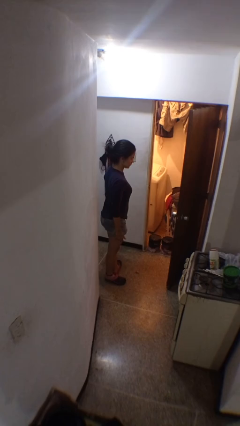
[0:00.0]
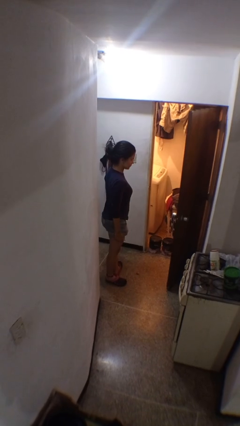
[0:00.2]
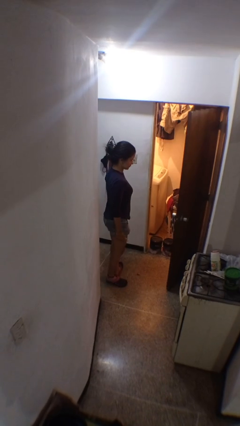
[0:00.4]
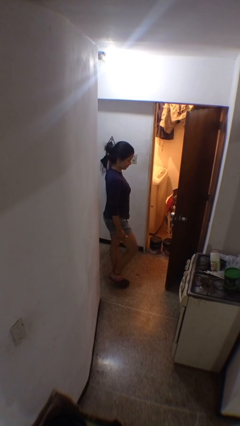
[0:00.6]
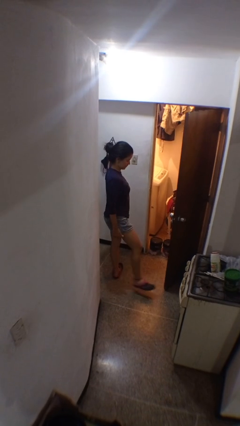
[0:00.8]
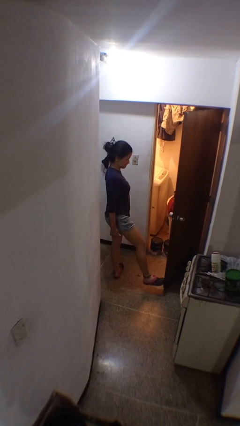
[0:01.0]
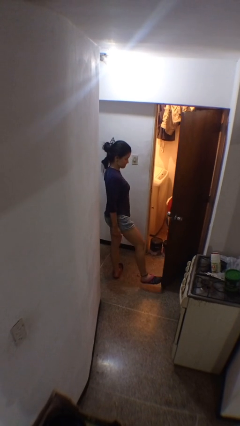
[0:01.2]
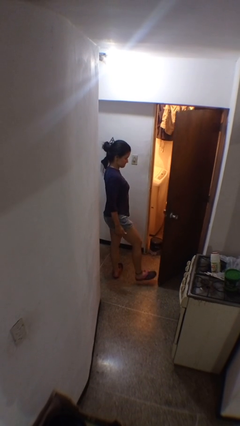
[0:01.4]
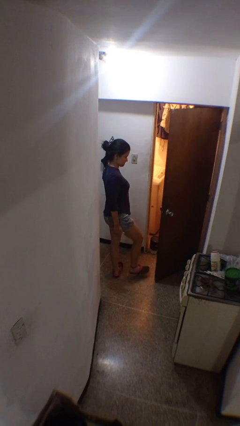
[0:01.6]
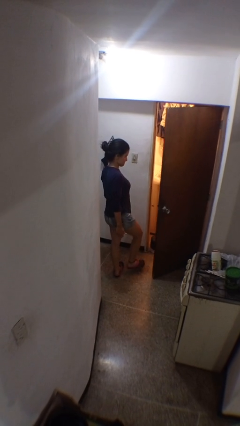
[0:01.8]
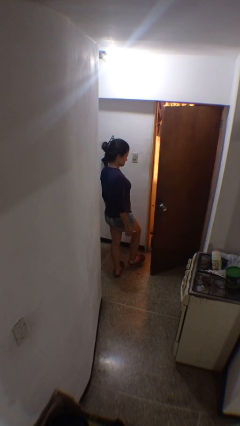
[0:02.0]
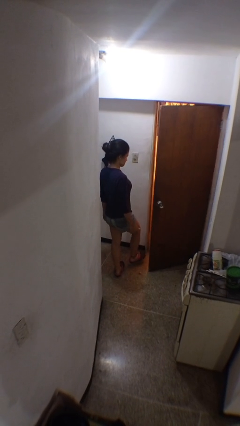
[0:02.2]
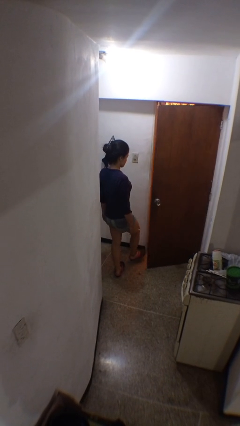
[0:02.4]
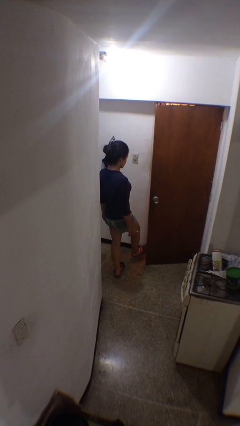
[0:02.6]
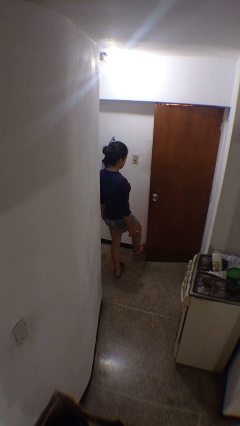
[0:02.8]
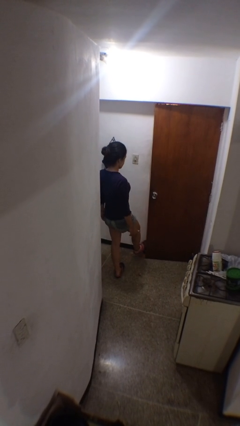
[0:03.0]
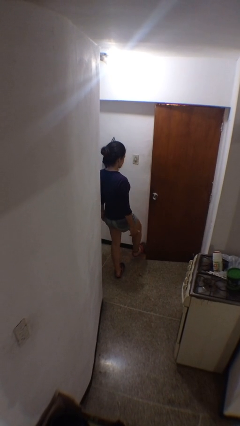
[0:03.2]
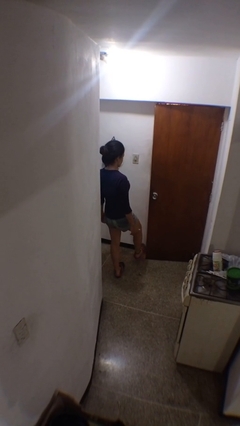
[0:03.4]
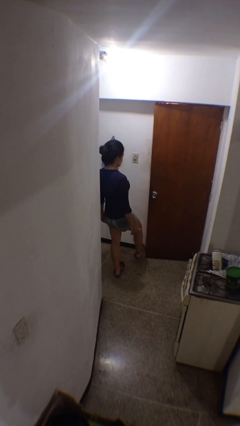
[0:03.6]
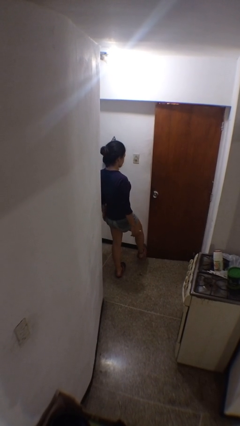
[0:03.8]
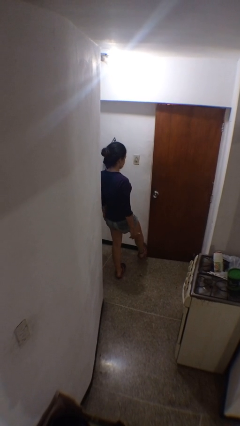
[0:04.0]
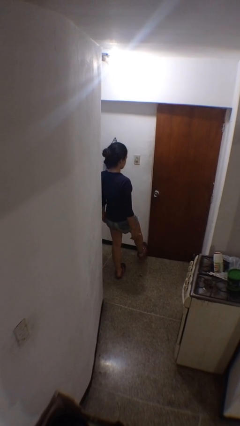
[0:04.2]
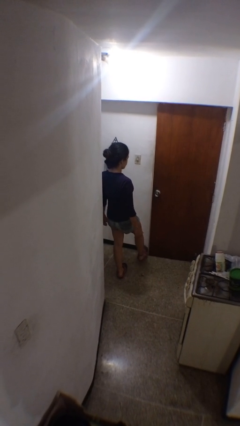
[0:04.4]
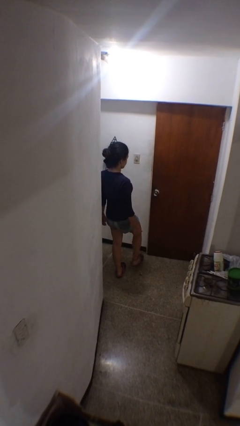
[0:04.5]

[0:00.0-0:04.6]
person closes door with foot

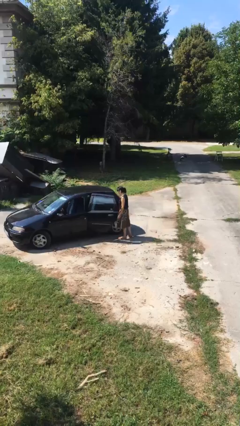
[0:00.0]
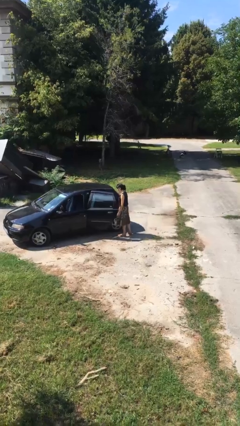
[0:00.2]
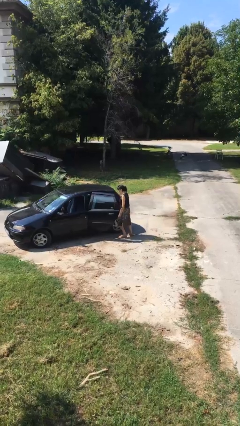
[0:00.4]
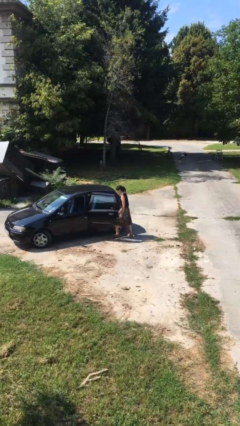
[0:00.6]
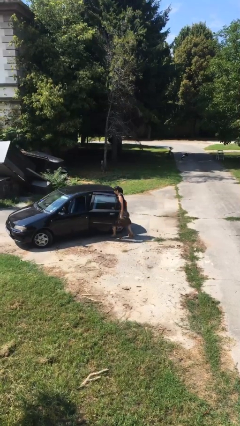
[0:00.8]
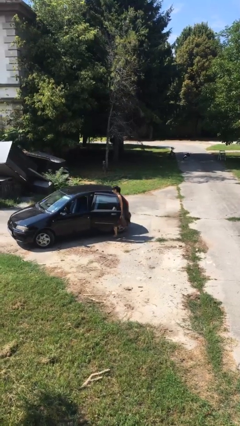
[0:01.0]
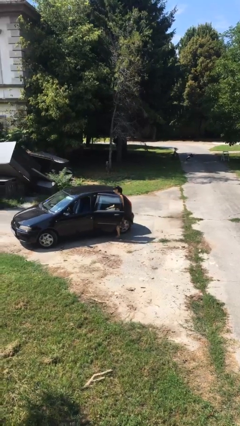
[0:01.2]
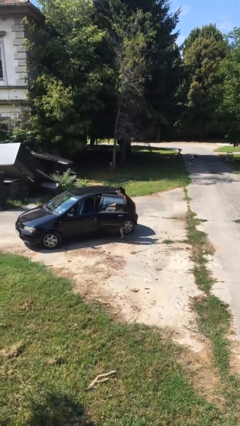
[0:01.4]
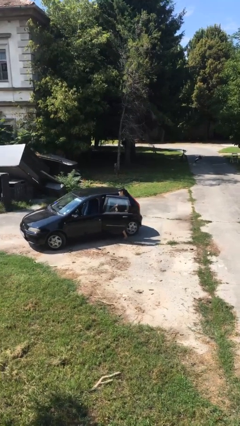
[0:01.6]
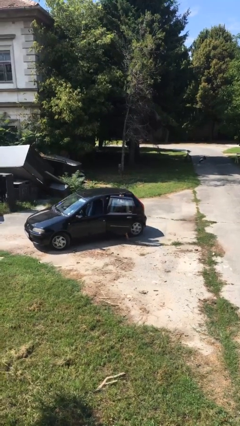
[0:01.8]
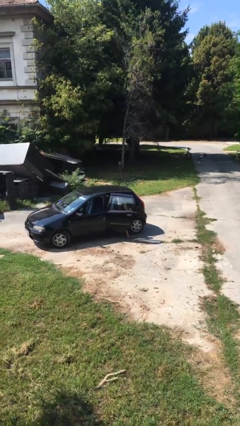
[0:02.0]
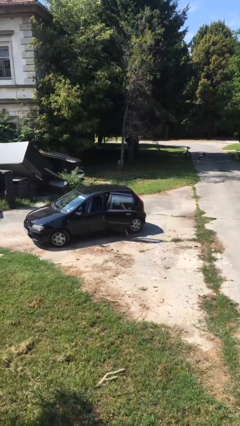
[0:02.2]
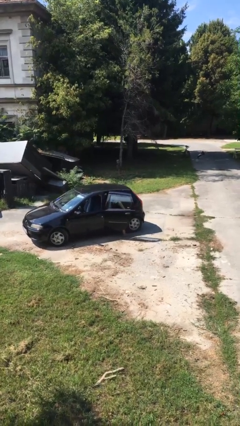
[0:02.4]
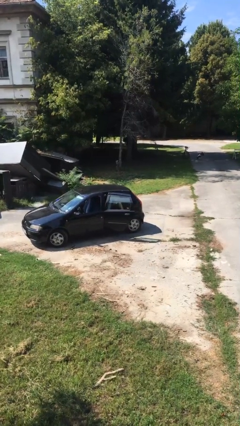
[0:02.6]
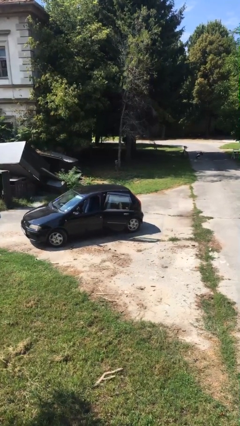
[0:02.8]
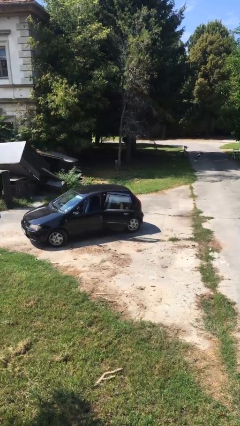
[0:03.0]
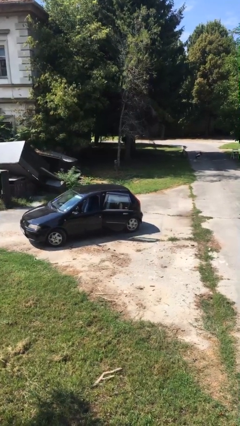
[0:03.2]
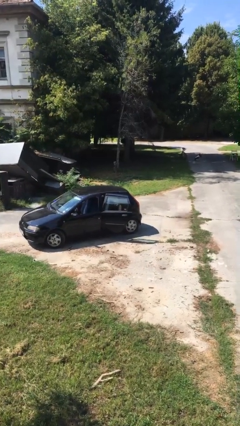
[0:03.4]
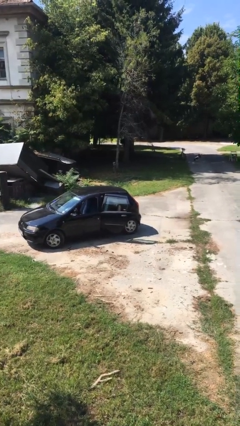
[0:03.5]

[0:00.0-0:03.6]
person enters car

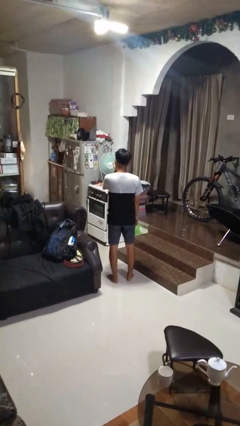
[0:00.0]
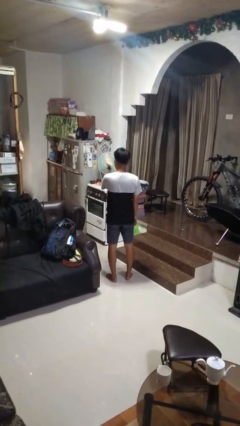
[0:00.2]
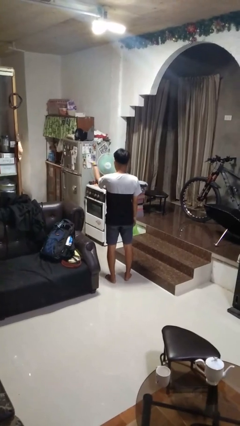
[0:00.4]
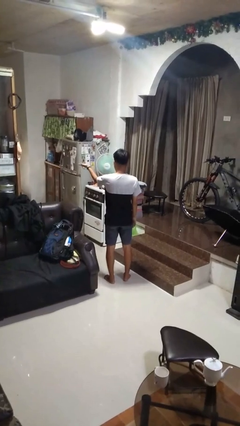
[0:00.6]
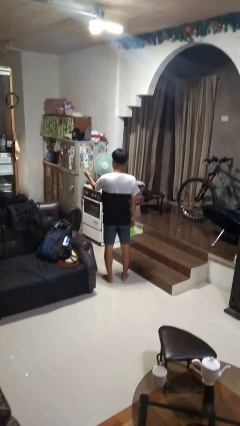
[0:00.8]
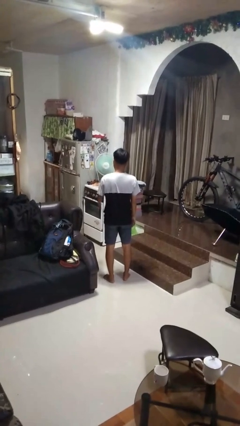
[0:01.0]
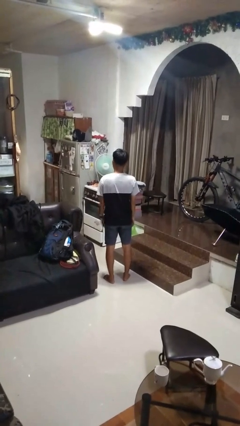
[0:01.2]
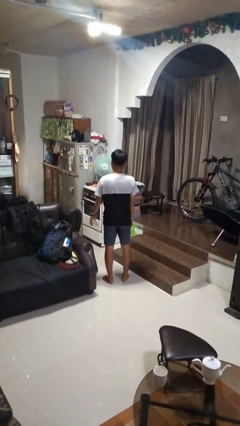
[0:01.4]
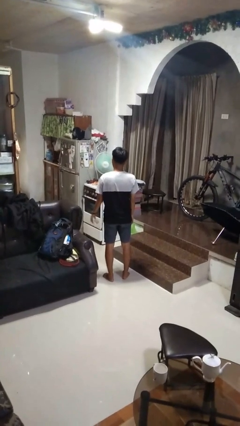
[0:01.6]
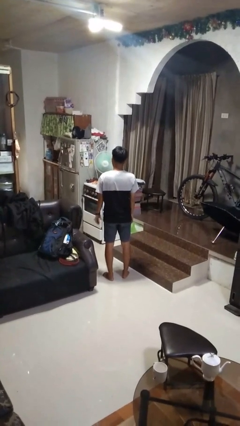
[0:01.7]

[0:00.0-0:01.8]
person gestures blow kiss

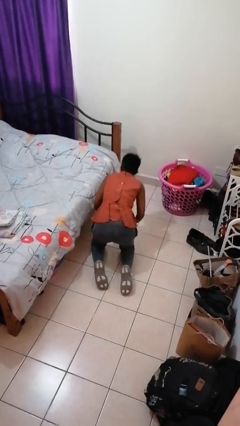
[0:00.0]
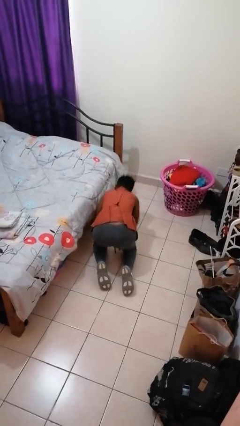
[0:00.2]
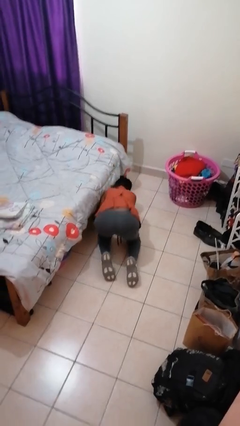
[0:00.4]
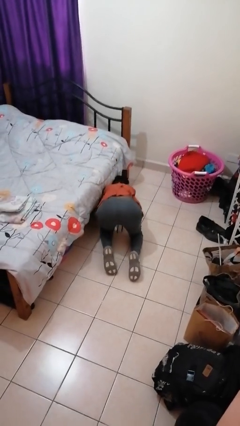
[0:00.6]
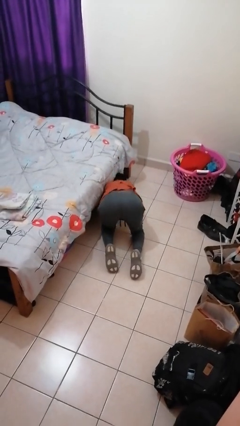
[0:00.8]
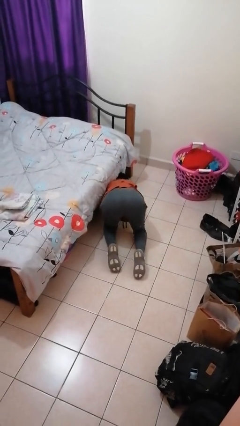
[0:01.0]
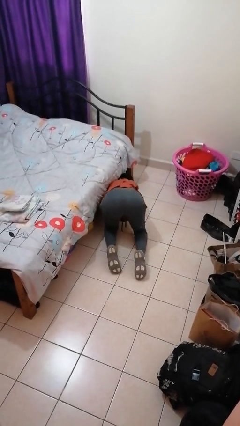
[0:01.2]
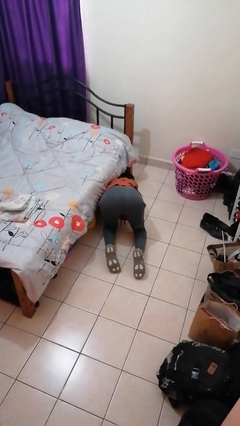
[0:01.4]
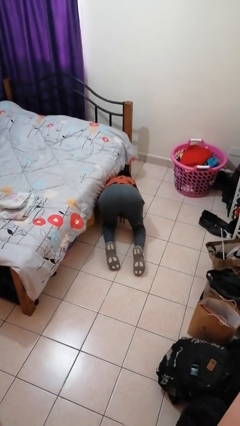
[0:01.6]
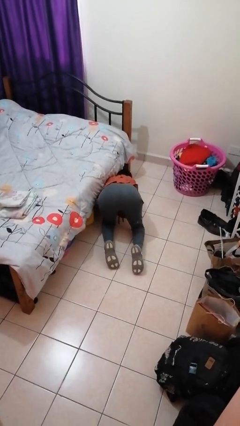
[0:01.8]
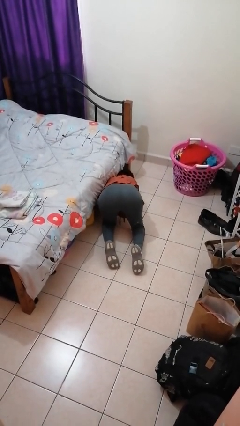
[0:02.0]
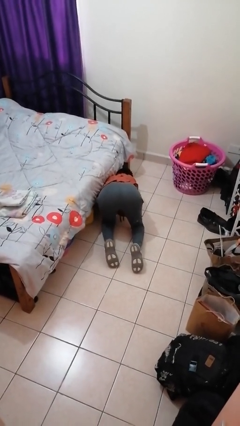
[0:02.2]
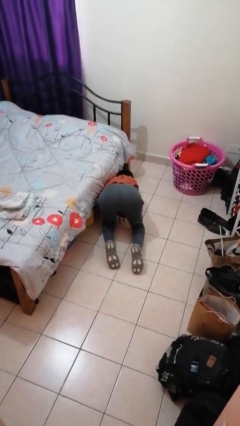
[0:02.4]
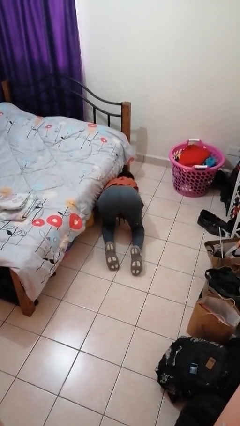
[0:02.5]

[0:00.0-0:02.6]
person searches under bed

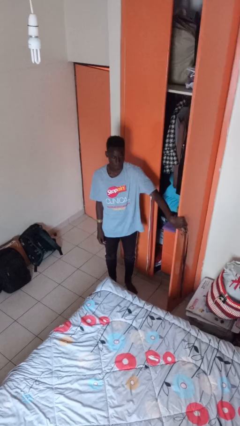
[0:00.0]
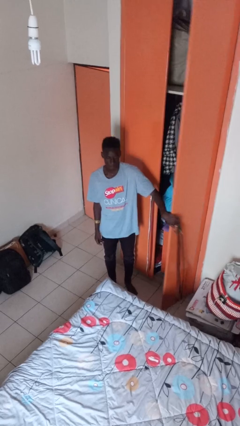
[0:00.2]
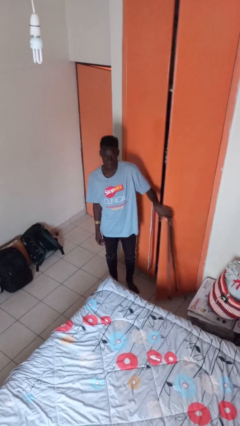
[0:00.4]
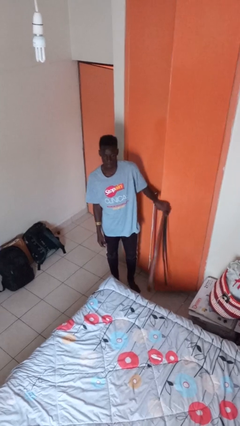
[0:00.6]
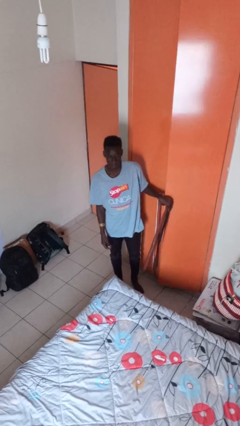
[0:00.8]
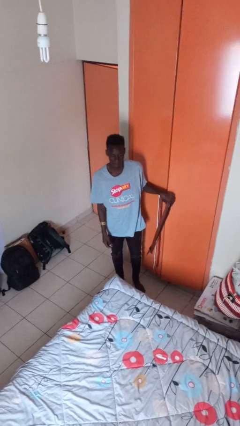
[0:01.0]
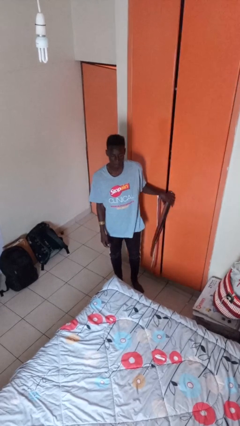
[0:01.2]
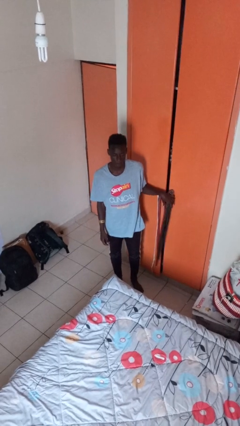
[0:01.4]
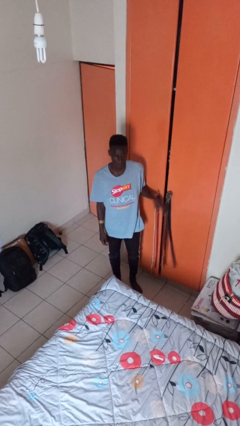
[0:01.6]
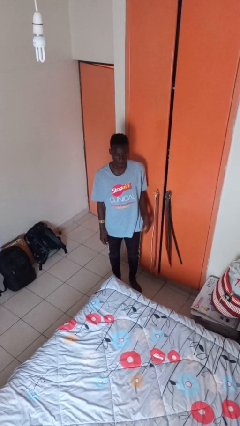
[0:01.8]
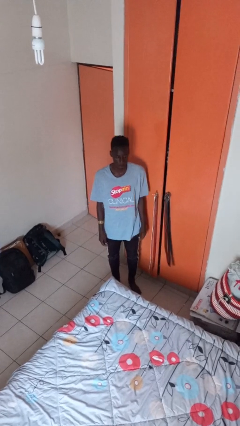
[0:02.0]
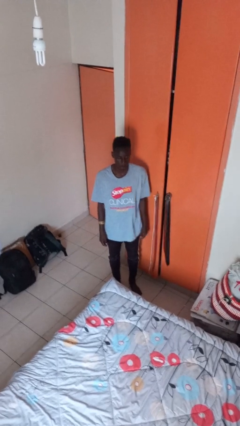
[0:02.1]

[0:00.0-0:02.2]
person closes closet door

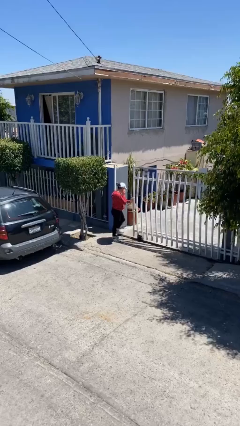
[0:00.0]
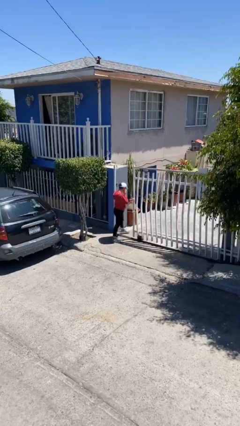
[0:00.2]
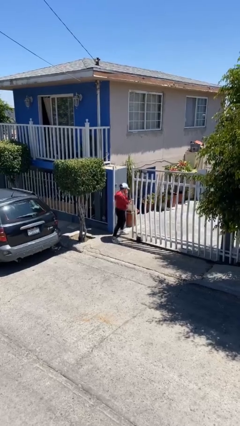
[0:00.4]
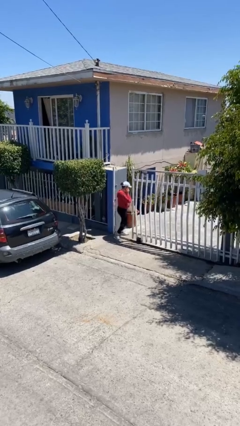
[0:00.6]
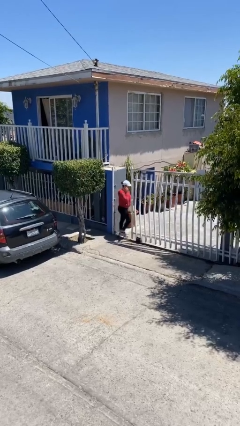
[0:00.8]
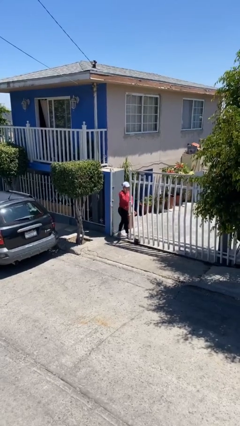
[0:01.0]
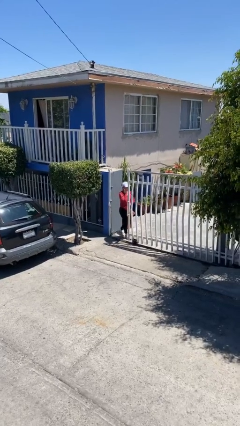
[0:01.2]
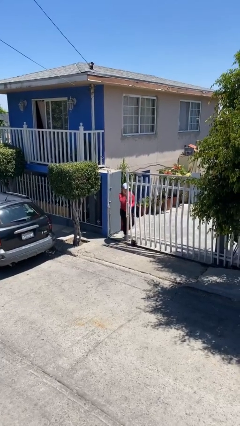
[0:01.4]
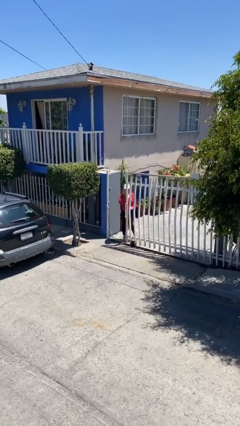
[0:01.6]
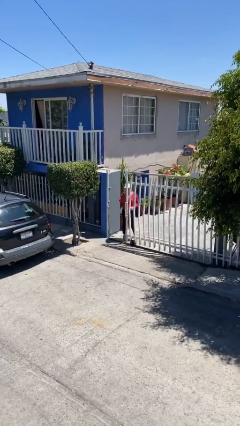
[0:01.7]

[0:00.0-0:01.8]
person exits scene through structure

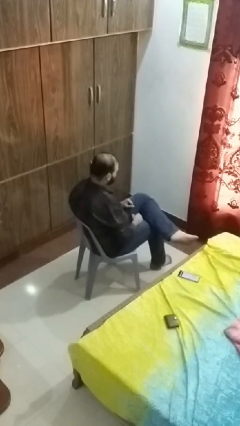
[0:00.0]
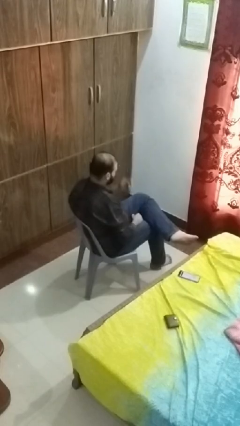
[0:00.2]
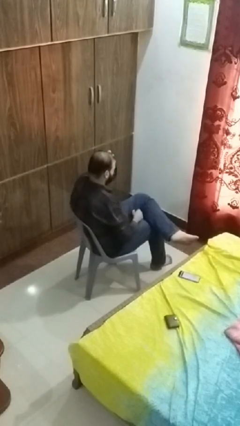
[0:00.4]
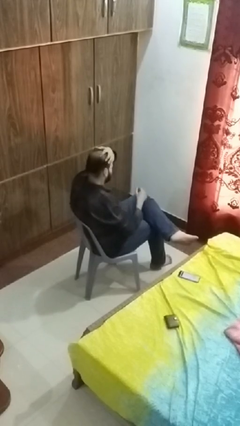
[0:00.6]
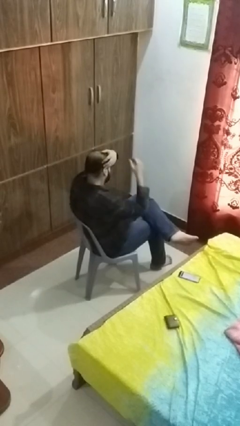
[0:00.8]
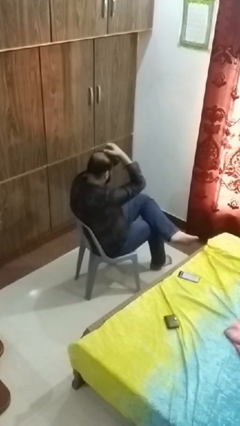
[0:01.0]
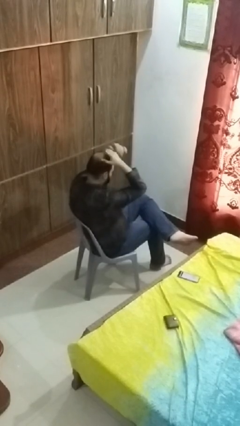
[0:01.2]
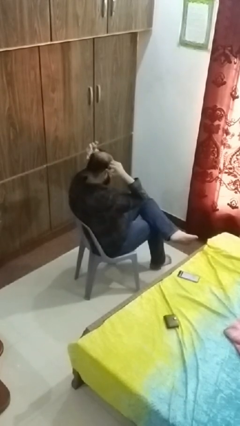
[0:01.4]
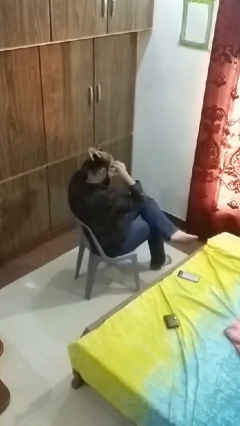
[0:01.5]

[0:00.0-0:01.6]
person strokes hair
